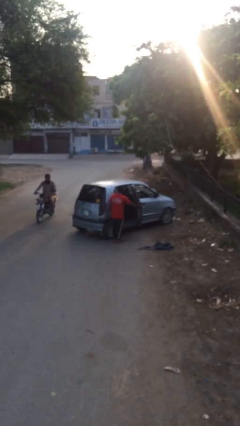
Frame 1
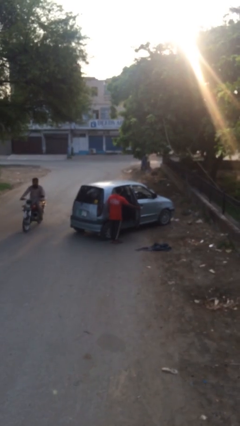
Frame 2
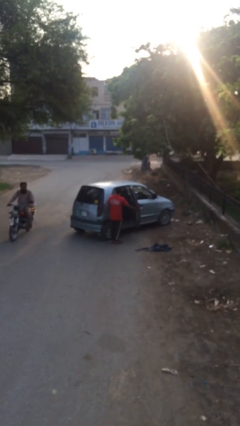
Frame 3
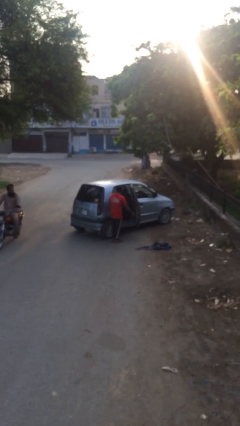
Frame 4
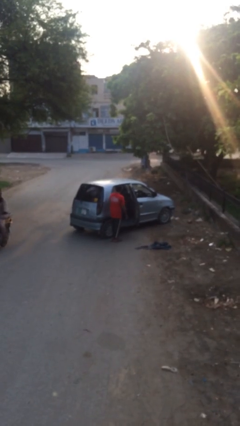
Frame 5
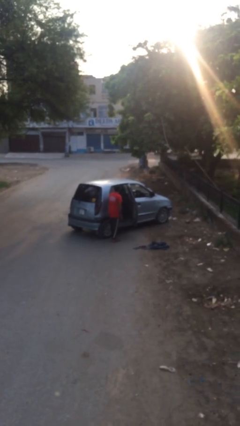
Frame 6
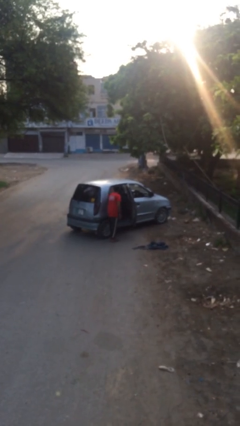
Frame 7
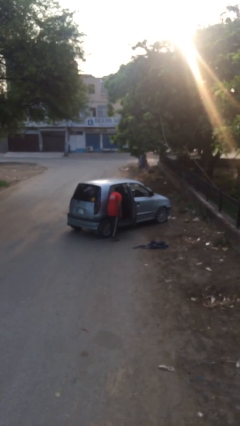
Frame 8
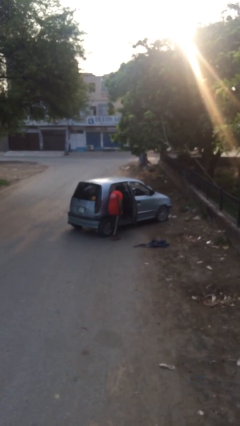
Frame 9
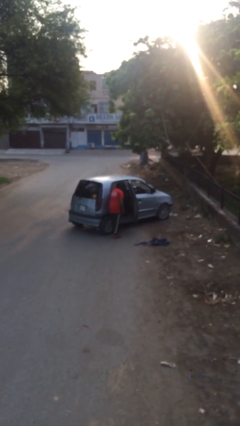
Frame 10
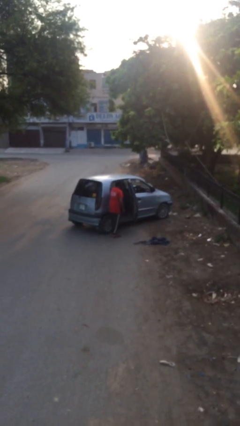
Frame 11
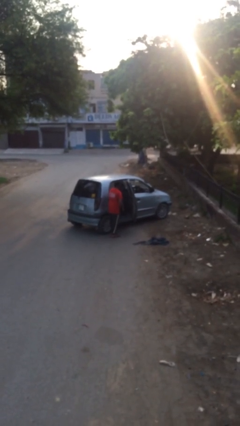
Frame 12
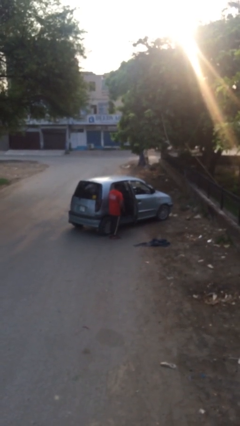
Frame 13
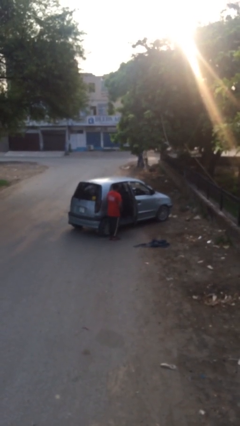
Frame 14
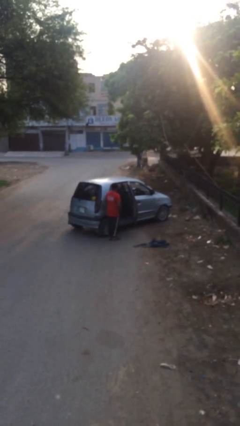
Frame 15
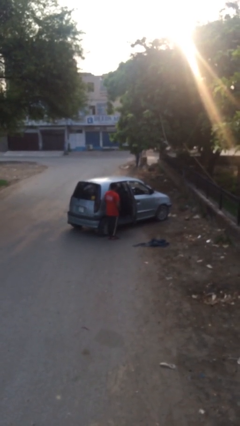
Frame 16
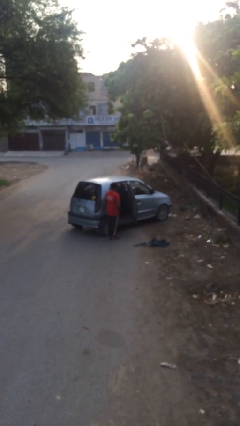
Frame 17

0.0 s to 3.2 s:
person unloads car

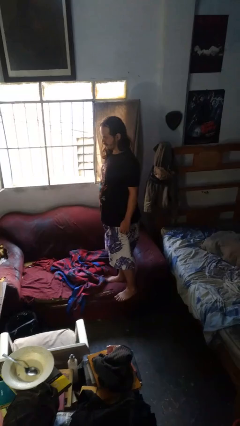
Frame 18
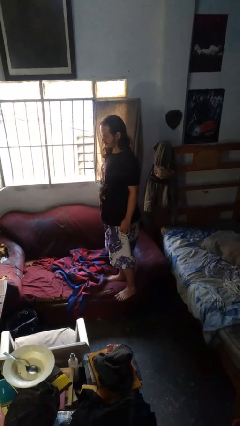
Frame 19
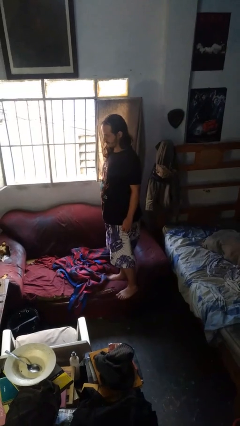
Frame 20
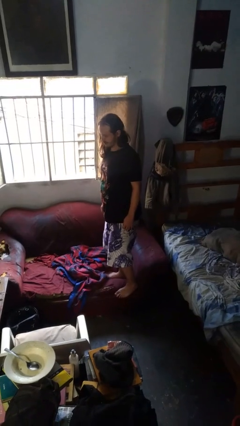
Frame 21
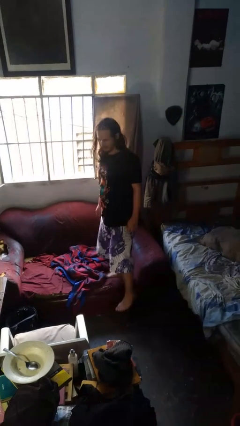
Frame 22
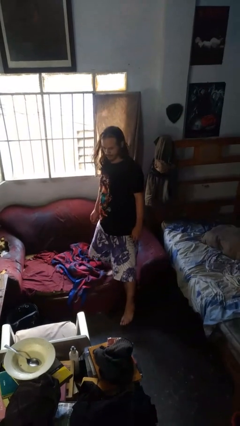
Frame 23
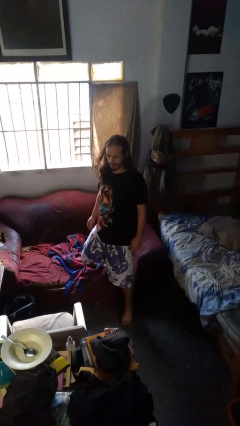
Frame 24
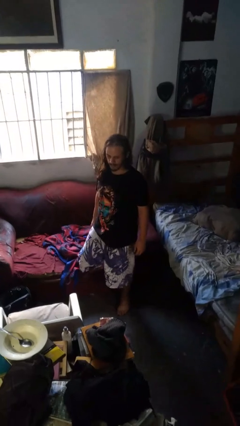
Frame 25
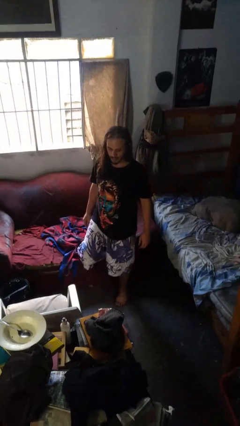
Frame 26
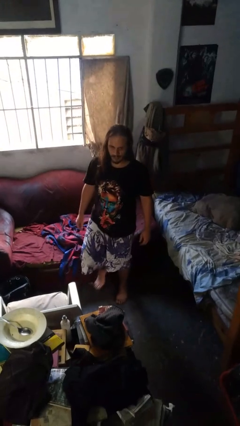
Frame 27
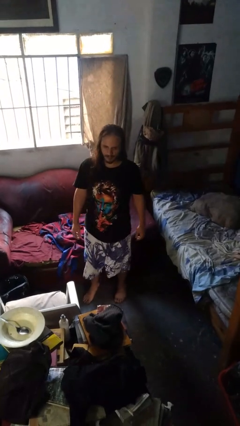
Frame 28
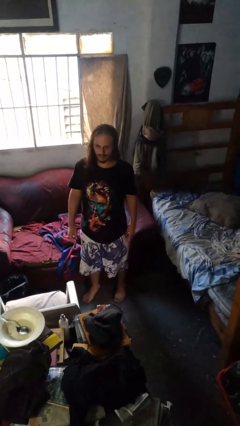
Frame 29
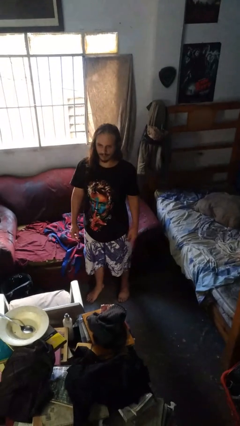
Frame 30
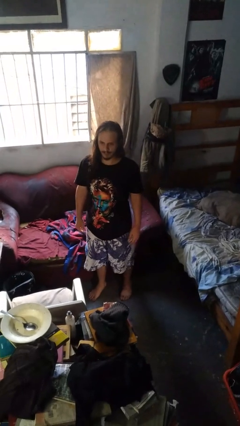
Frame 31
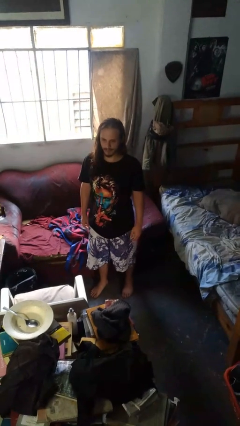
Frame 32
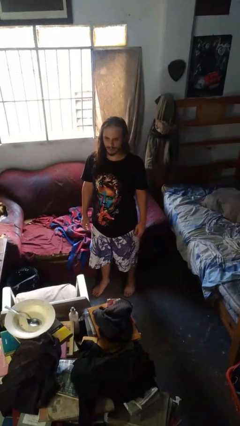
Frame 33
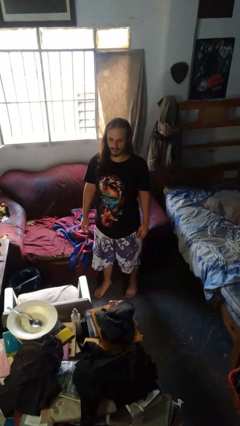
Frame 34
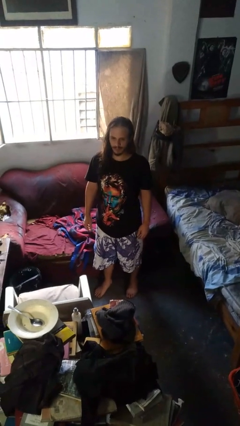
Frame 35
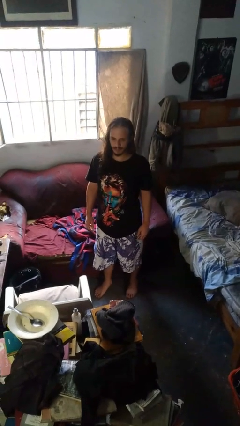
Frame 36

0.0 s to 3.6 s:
person climbs off couch

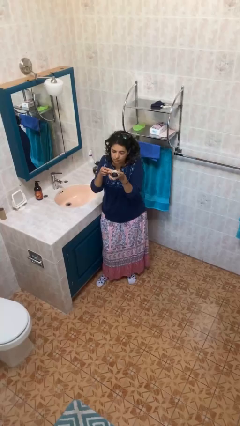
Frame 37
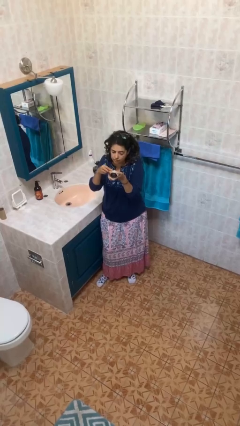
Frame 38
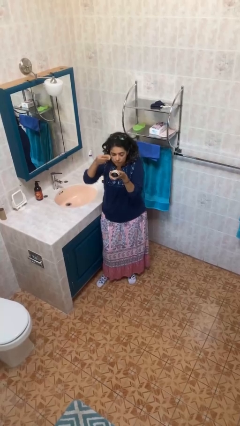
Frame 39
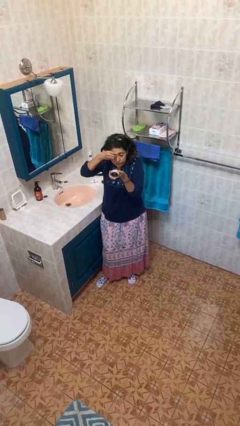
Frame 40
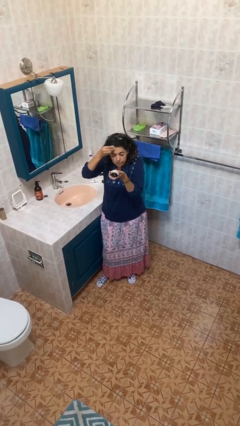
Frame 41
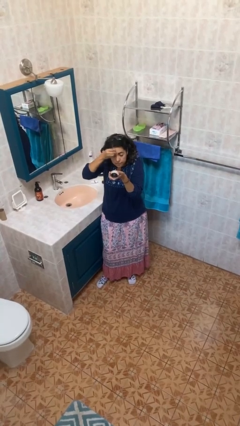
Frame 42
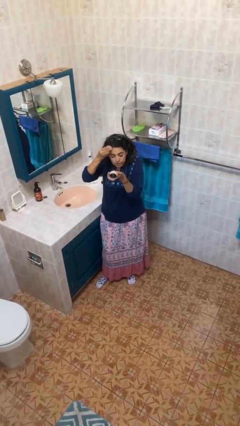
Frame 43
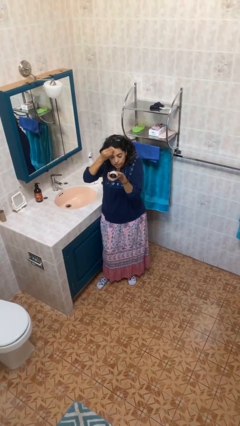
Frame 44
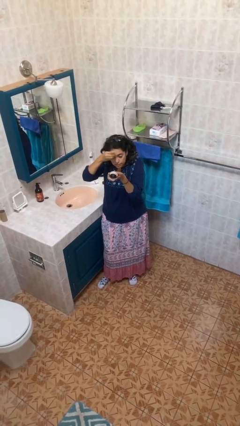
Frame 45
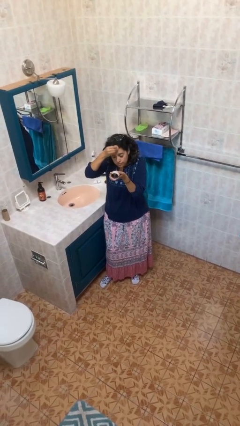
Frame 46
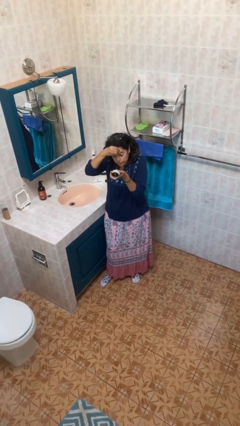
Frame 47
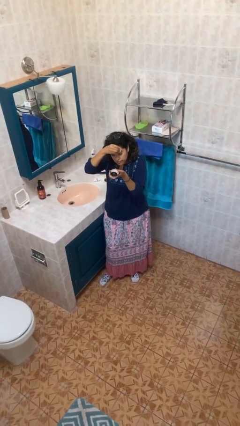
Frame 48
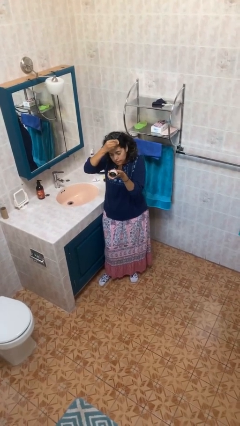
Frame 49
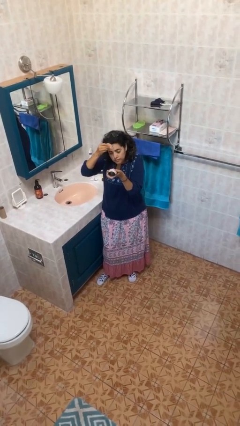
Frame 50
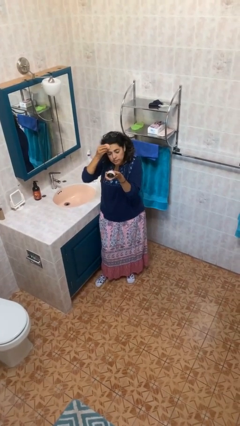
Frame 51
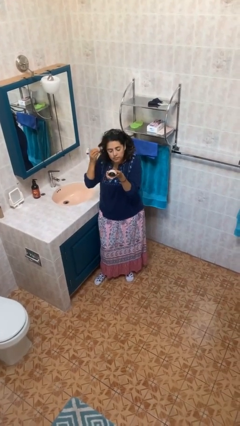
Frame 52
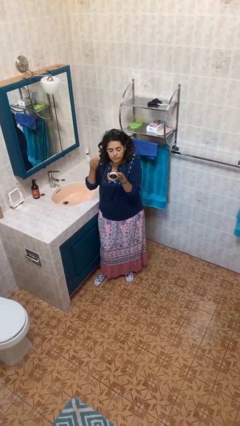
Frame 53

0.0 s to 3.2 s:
person applies foundation makeup

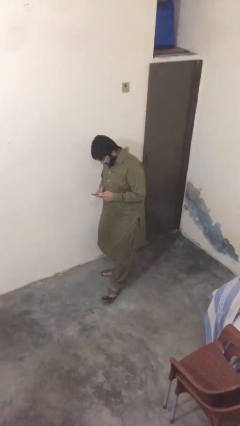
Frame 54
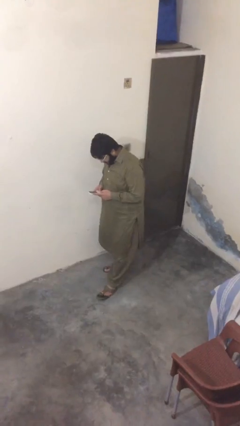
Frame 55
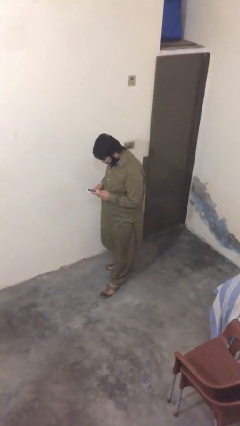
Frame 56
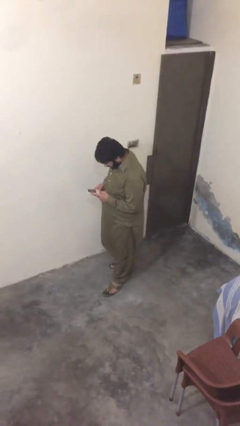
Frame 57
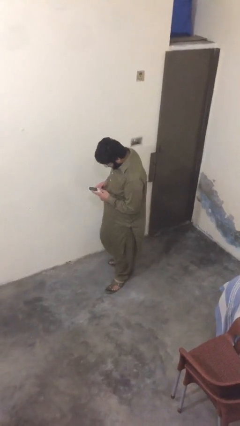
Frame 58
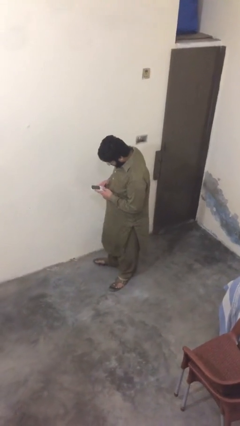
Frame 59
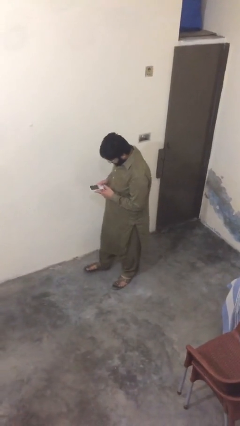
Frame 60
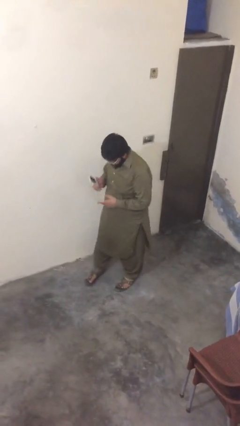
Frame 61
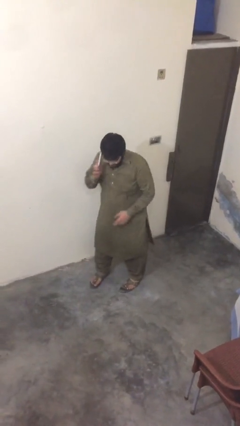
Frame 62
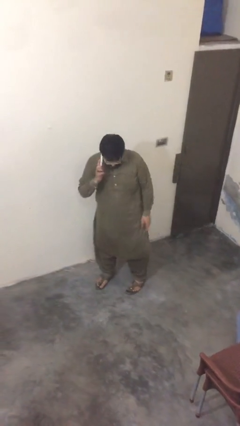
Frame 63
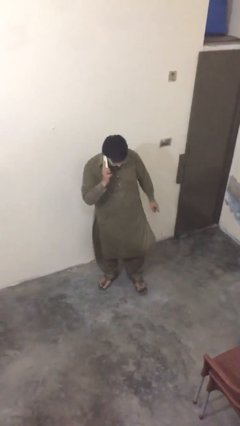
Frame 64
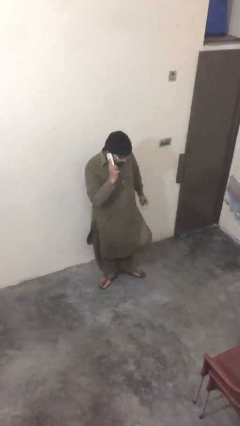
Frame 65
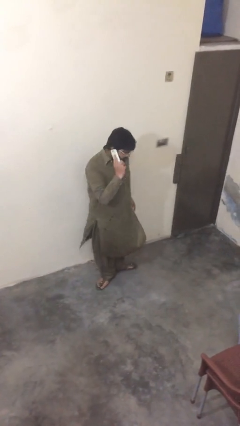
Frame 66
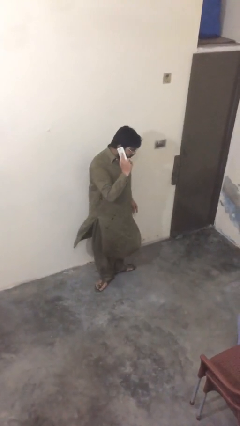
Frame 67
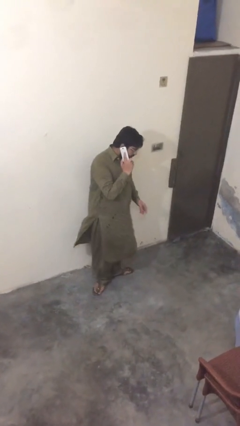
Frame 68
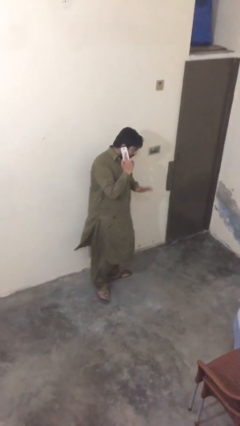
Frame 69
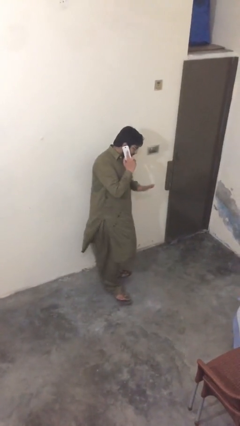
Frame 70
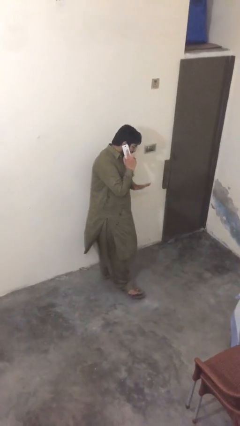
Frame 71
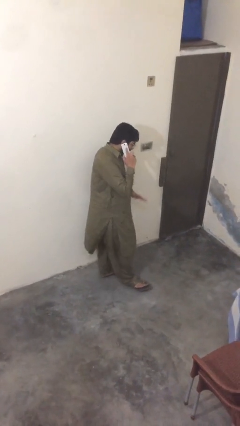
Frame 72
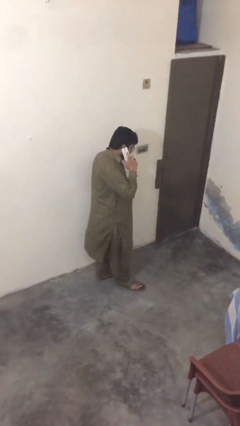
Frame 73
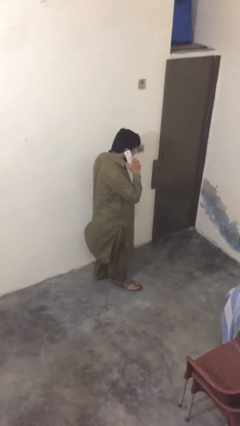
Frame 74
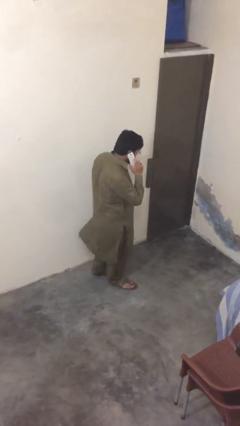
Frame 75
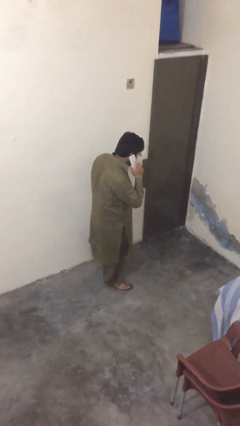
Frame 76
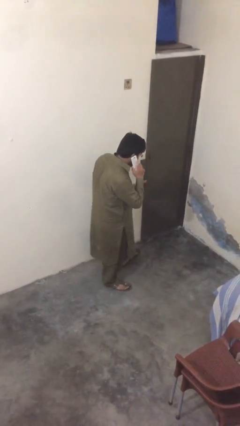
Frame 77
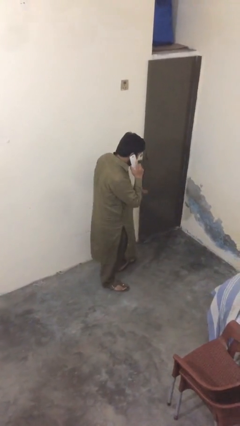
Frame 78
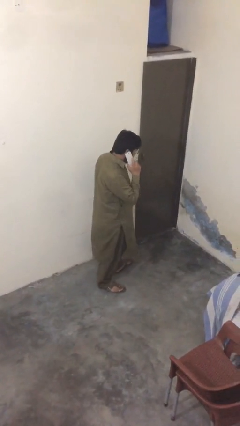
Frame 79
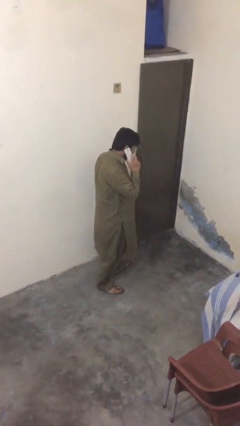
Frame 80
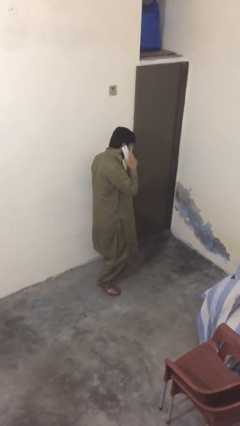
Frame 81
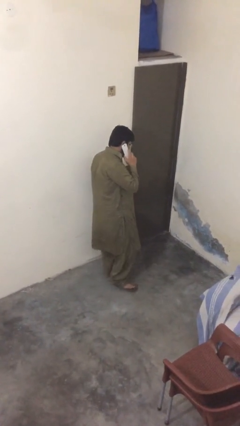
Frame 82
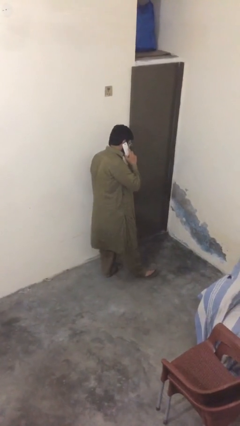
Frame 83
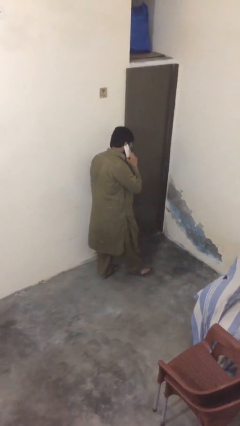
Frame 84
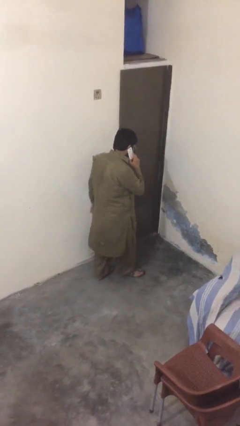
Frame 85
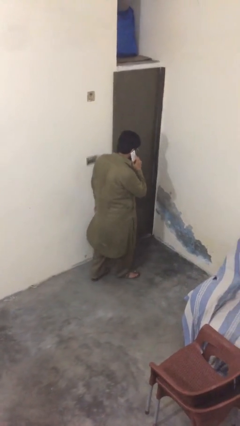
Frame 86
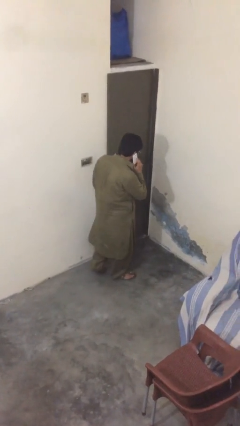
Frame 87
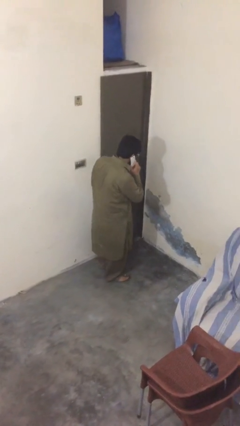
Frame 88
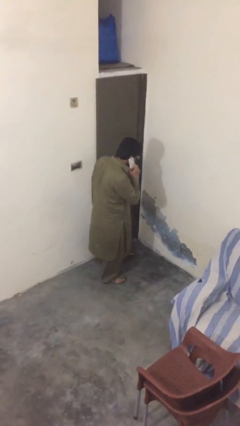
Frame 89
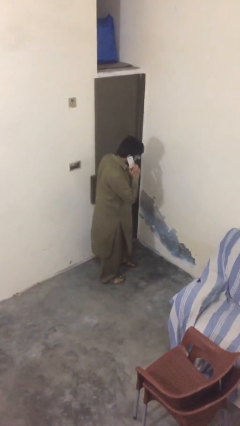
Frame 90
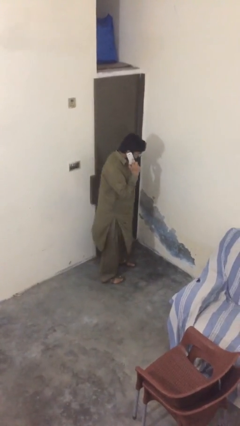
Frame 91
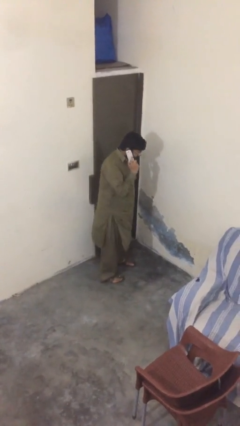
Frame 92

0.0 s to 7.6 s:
person talks on phone

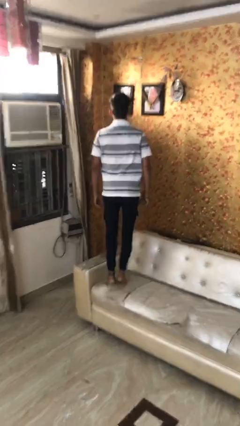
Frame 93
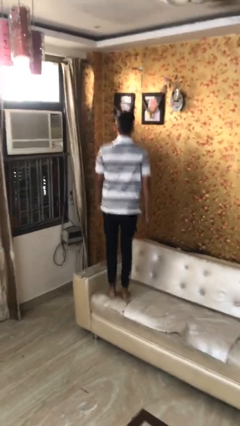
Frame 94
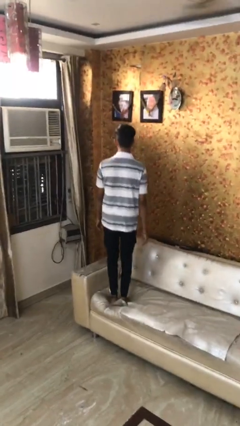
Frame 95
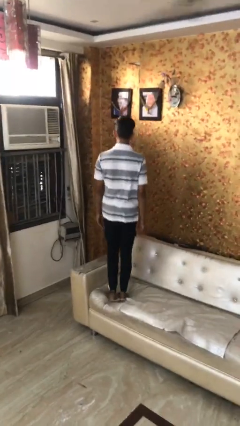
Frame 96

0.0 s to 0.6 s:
person jumps on bed
